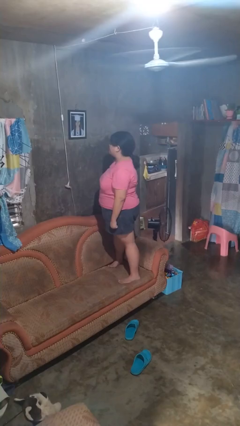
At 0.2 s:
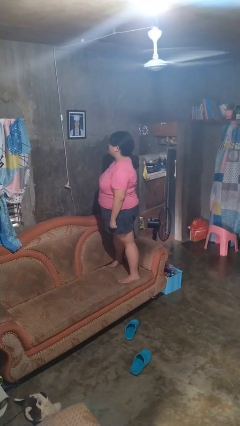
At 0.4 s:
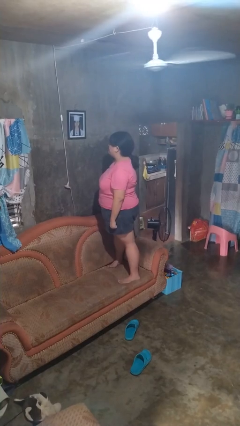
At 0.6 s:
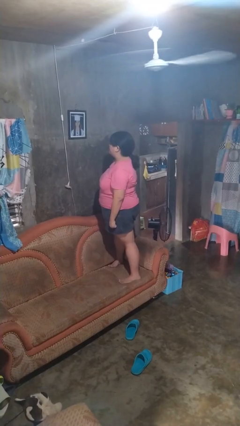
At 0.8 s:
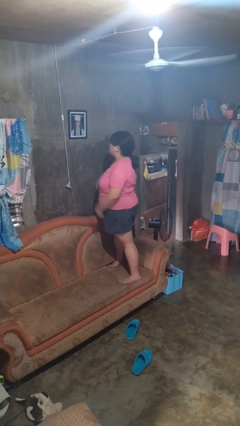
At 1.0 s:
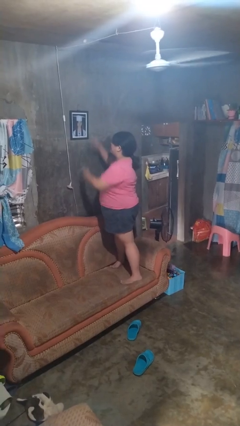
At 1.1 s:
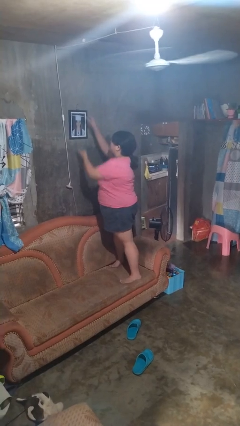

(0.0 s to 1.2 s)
person takes down picture frame

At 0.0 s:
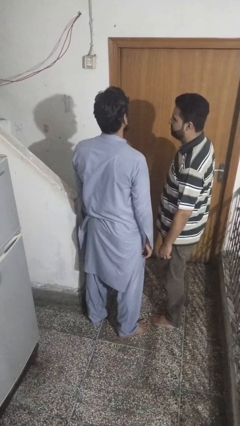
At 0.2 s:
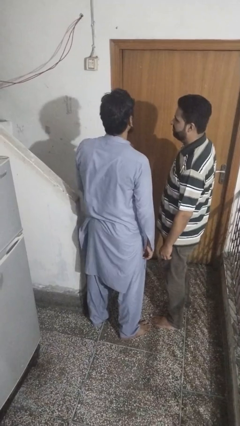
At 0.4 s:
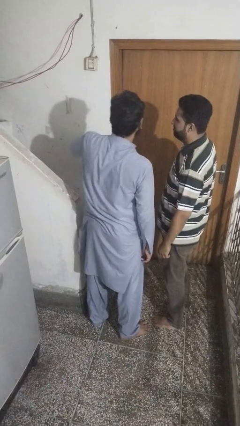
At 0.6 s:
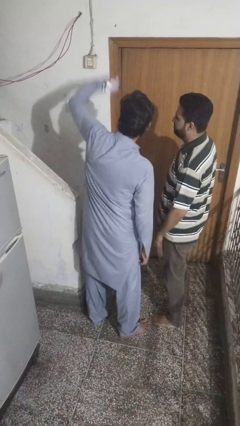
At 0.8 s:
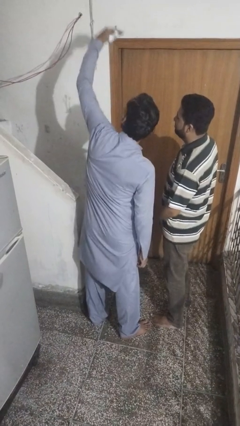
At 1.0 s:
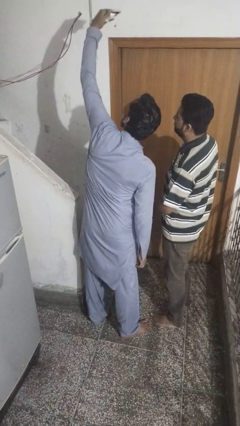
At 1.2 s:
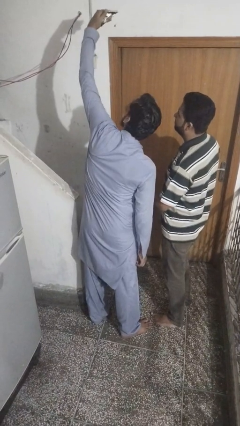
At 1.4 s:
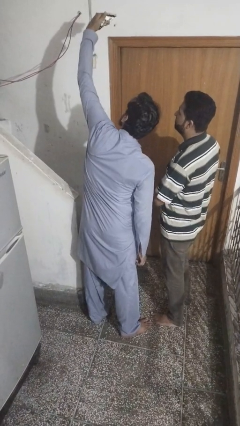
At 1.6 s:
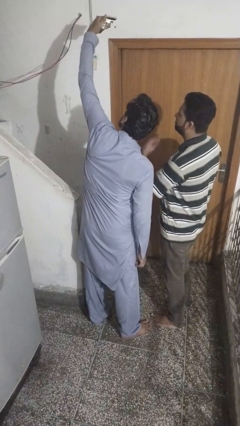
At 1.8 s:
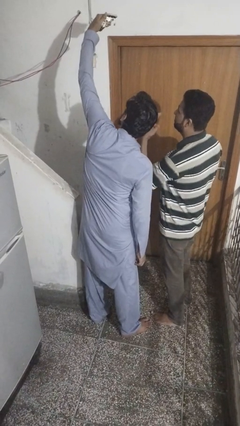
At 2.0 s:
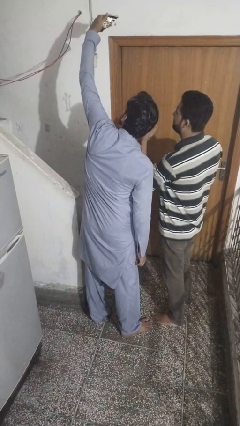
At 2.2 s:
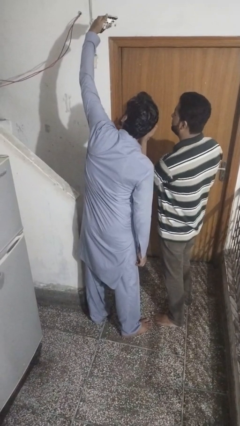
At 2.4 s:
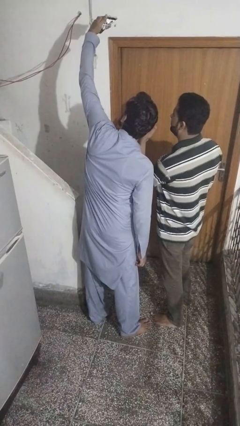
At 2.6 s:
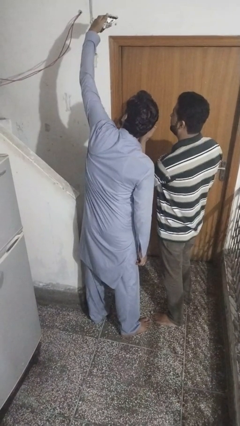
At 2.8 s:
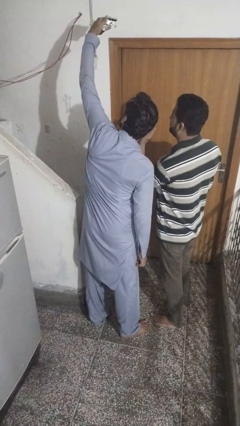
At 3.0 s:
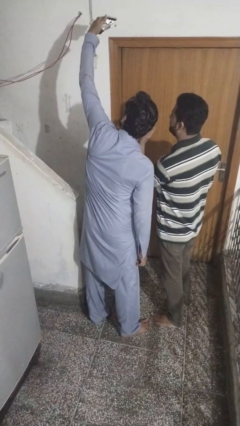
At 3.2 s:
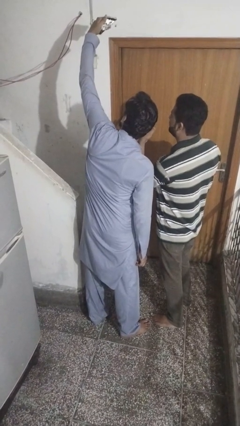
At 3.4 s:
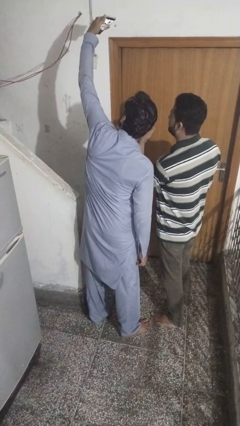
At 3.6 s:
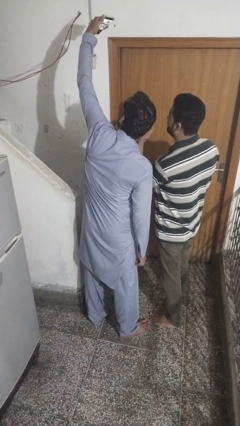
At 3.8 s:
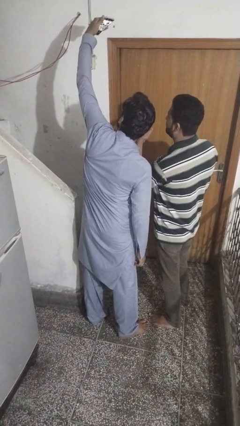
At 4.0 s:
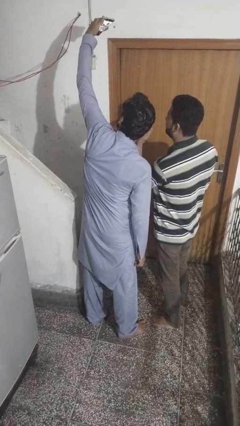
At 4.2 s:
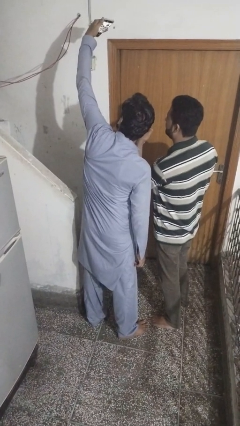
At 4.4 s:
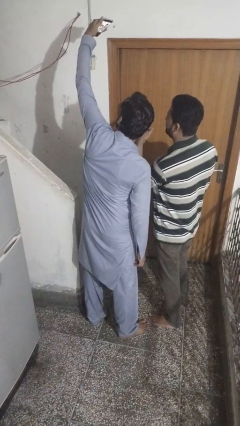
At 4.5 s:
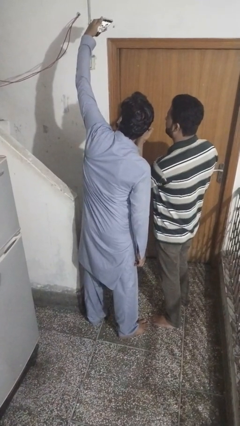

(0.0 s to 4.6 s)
person takes selfie with person

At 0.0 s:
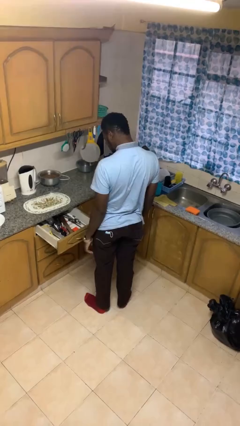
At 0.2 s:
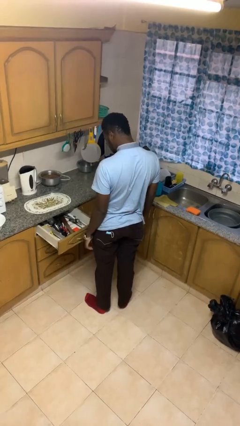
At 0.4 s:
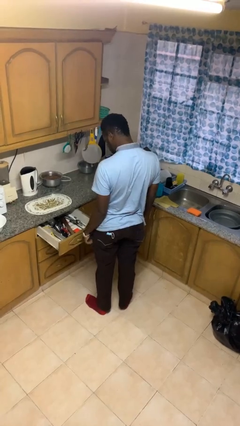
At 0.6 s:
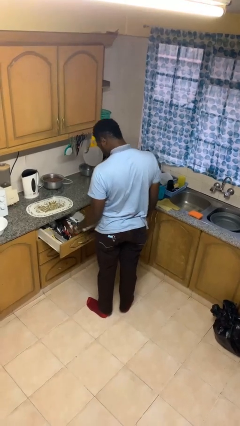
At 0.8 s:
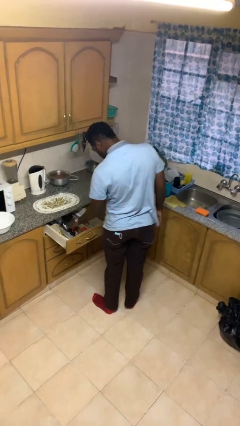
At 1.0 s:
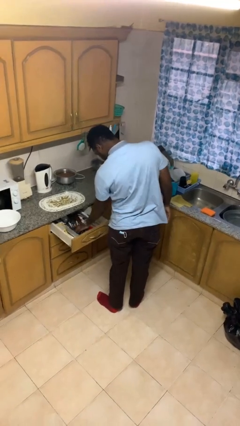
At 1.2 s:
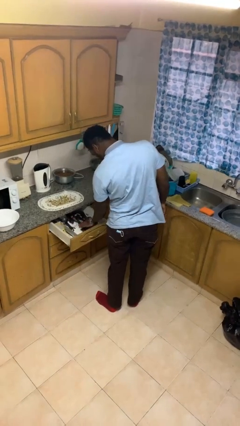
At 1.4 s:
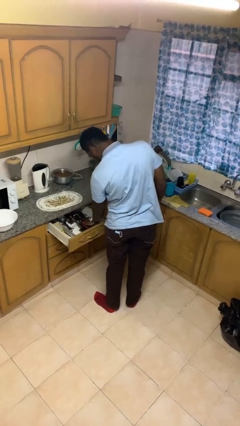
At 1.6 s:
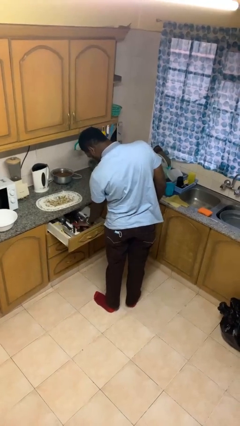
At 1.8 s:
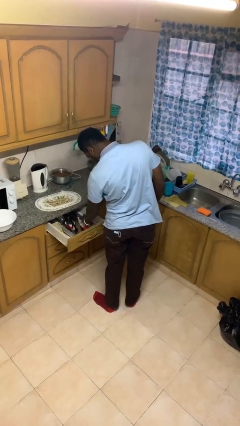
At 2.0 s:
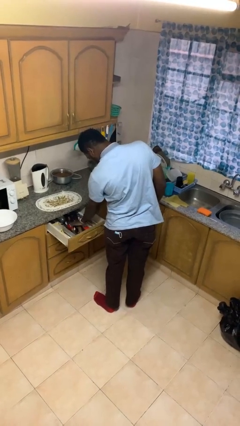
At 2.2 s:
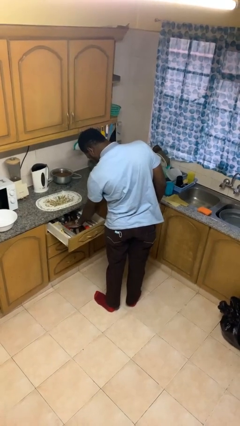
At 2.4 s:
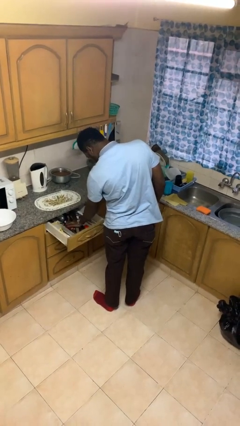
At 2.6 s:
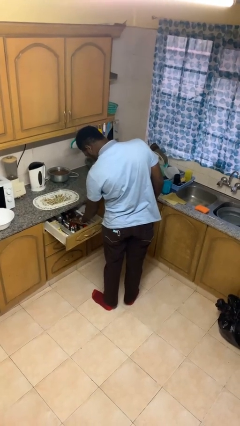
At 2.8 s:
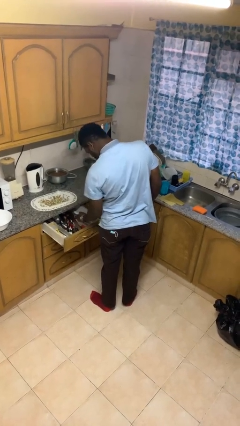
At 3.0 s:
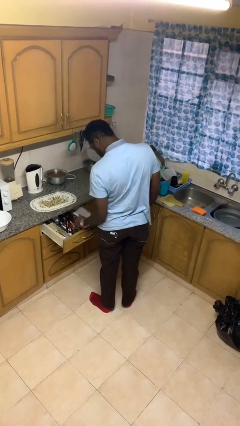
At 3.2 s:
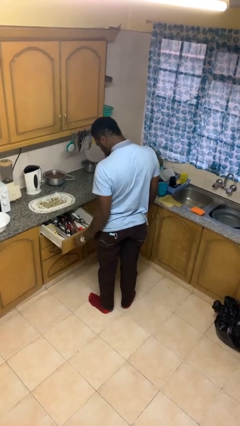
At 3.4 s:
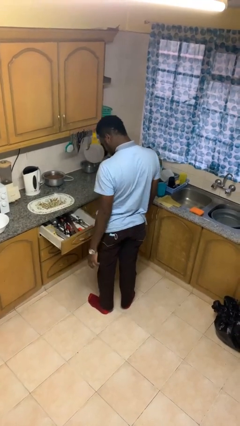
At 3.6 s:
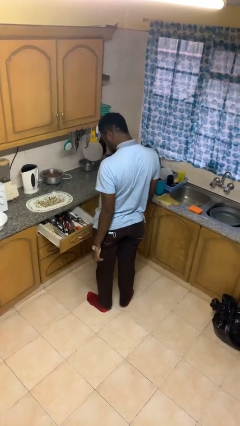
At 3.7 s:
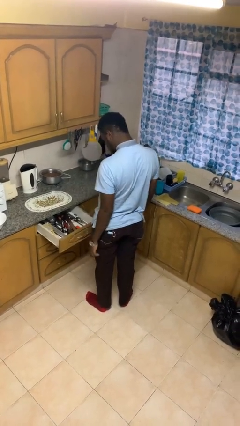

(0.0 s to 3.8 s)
person searches in kitchen drawer

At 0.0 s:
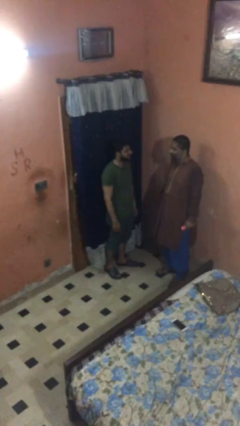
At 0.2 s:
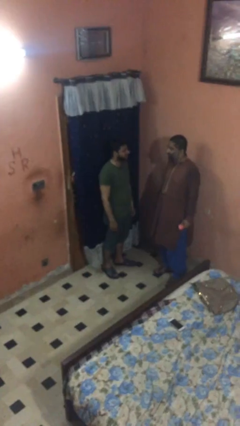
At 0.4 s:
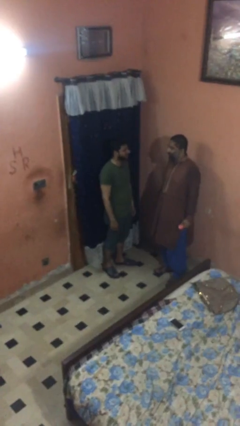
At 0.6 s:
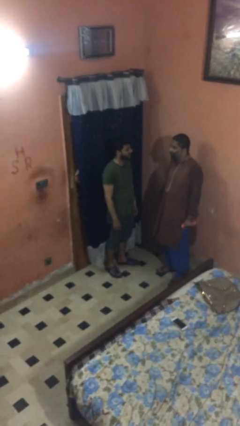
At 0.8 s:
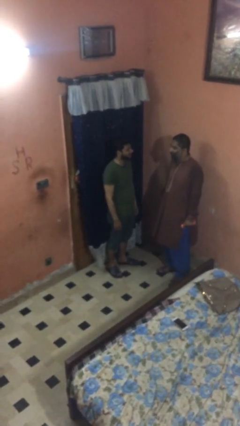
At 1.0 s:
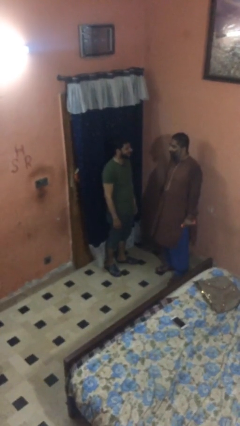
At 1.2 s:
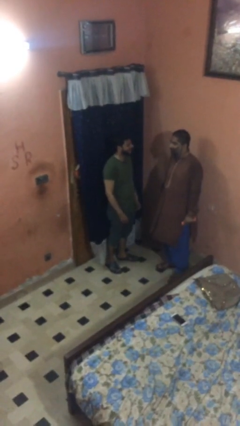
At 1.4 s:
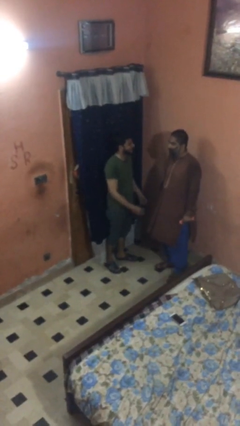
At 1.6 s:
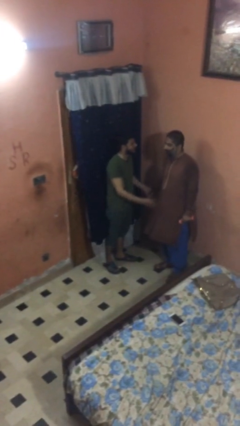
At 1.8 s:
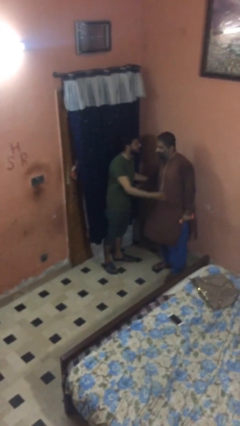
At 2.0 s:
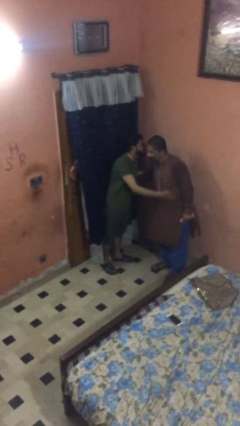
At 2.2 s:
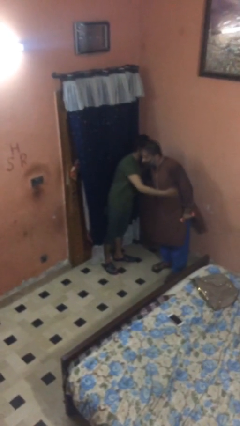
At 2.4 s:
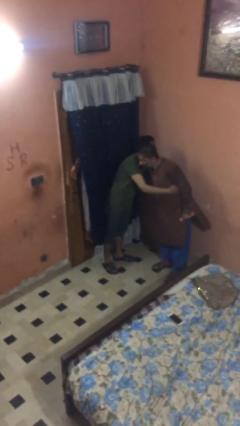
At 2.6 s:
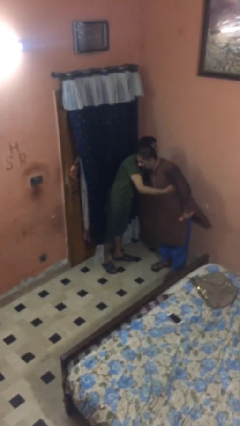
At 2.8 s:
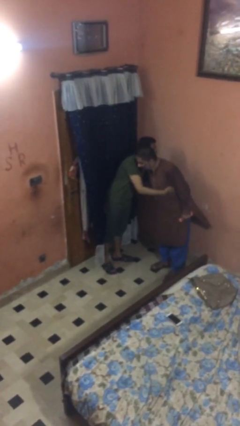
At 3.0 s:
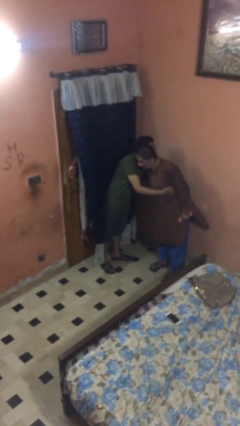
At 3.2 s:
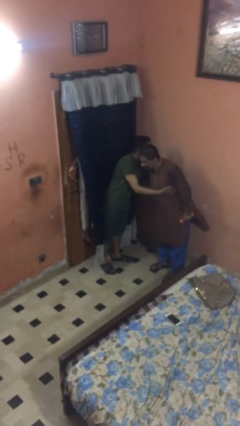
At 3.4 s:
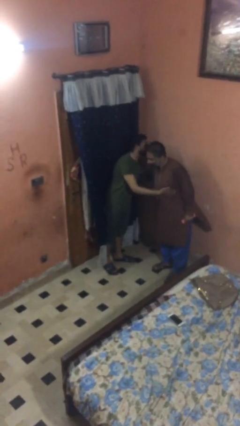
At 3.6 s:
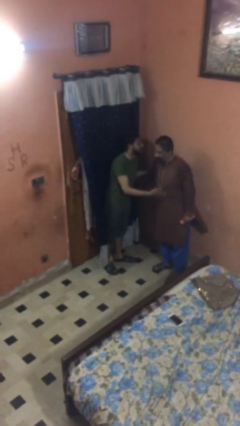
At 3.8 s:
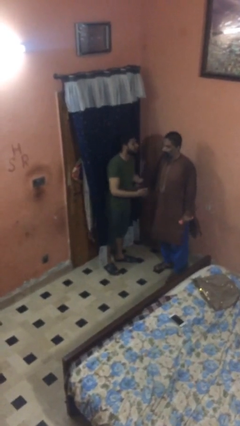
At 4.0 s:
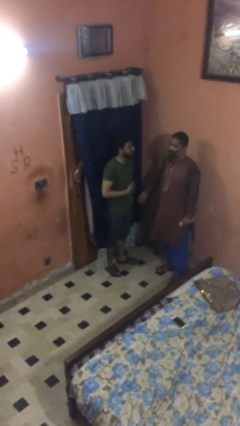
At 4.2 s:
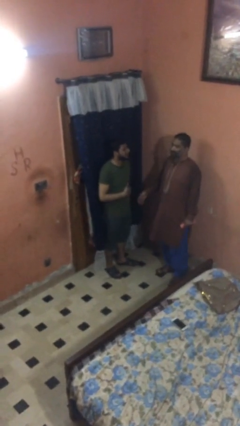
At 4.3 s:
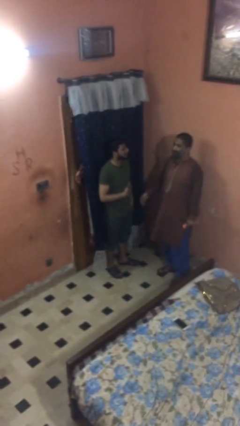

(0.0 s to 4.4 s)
person embraces person

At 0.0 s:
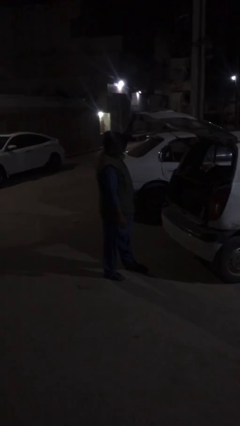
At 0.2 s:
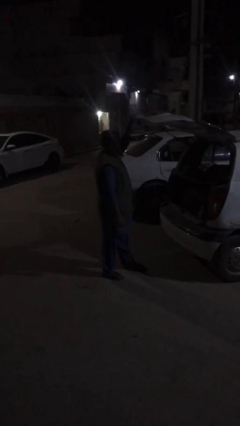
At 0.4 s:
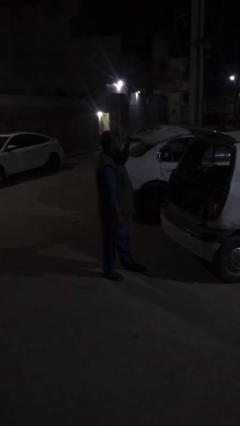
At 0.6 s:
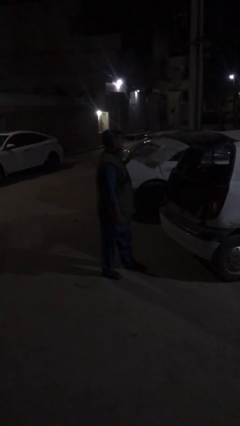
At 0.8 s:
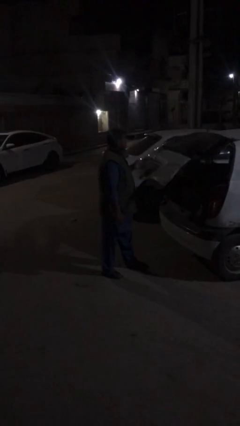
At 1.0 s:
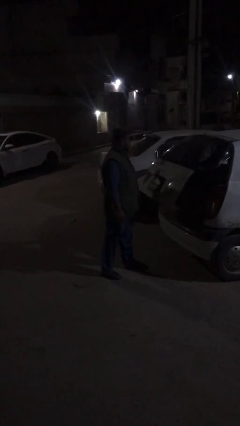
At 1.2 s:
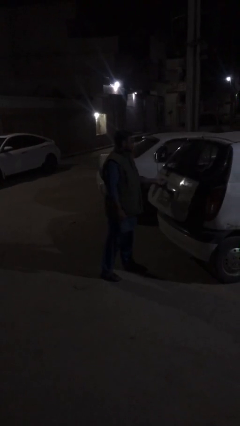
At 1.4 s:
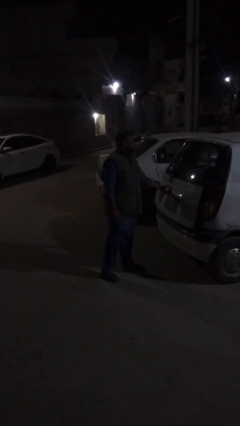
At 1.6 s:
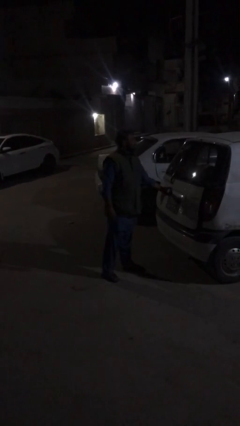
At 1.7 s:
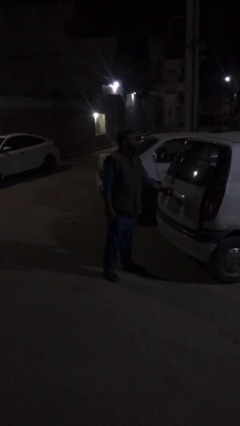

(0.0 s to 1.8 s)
person closes car trunk

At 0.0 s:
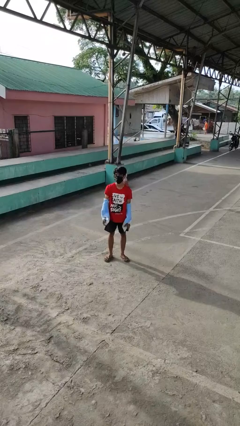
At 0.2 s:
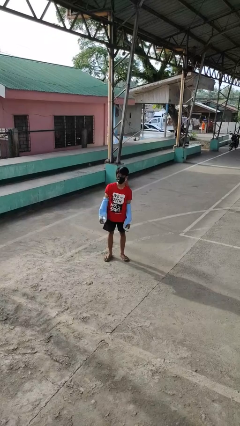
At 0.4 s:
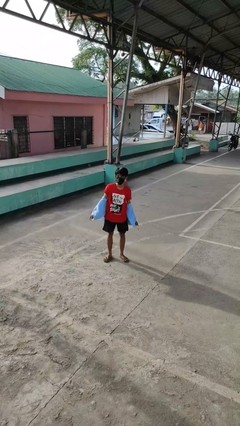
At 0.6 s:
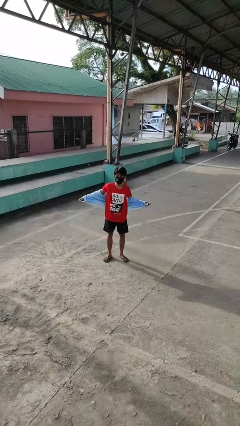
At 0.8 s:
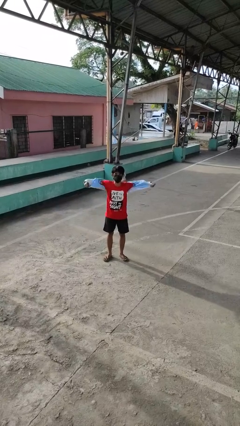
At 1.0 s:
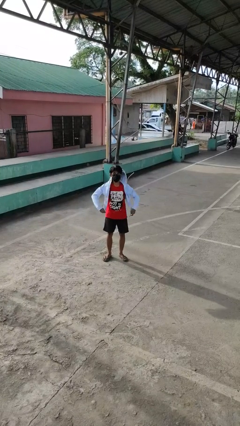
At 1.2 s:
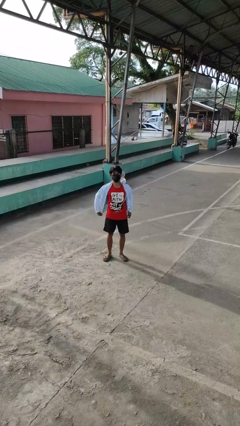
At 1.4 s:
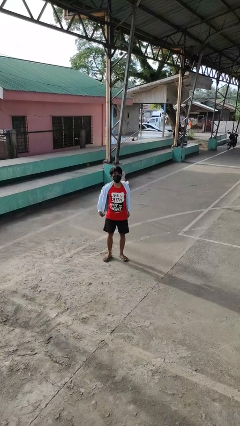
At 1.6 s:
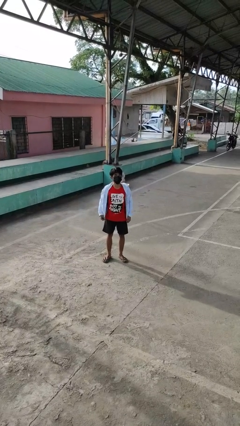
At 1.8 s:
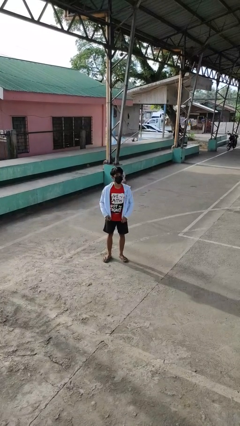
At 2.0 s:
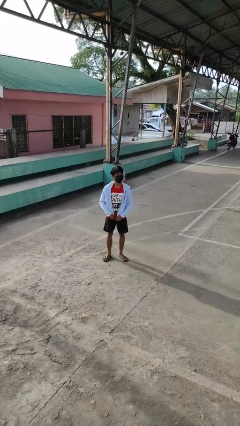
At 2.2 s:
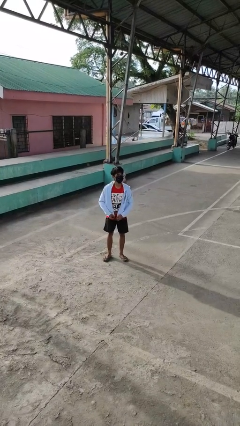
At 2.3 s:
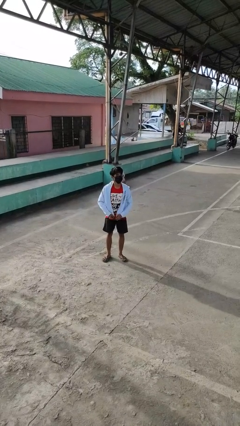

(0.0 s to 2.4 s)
person puts on jacket
